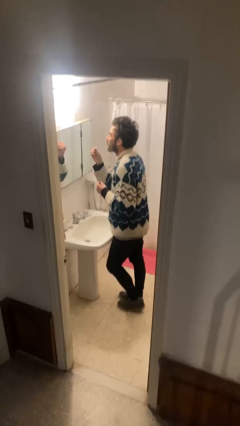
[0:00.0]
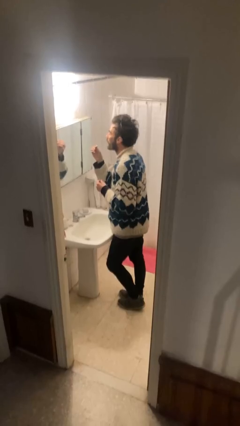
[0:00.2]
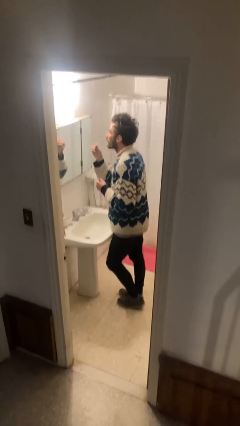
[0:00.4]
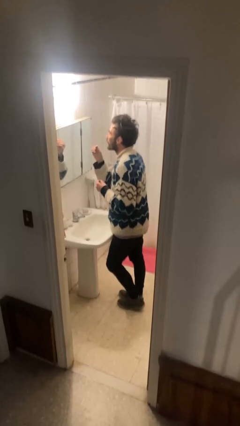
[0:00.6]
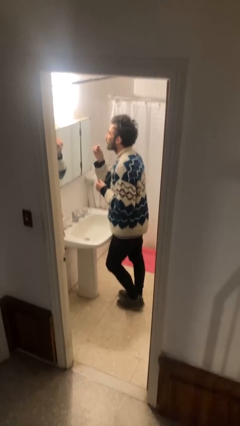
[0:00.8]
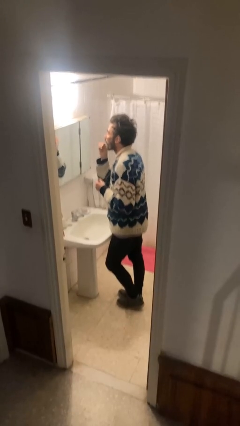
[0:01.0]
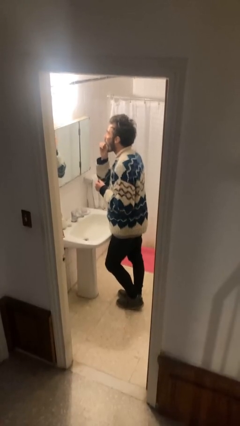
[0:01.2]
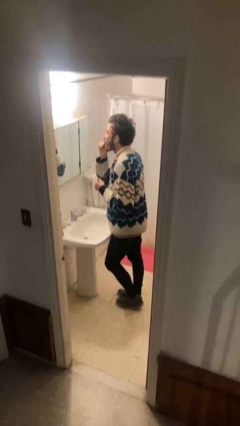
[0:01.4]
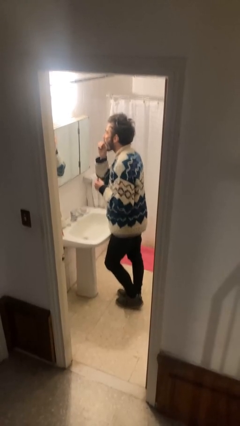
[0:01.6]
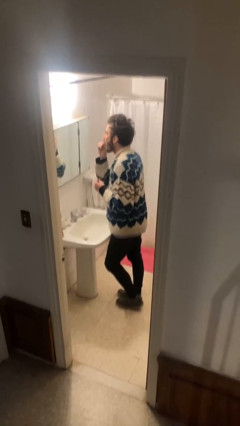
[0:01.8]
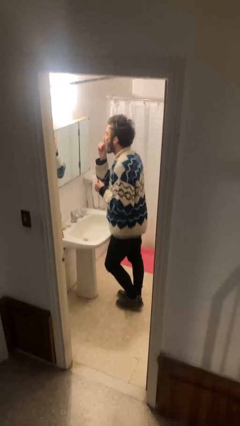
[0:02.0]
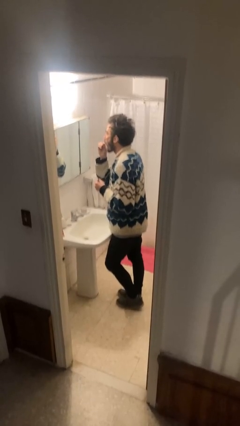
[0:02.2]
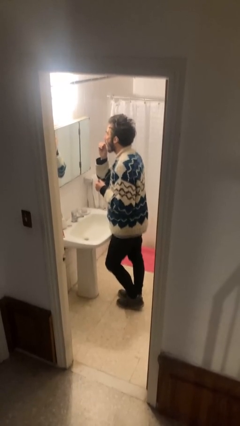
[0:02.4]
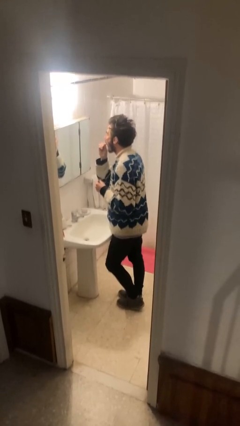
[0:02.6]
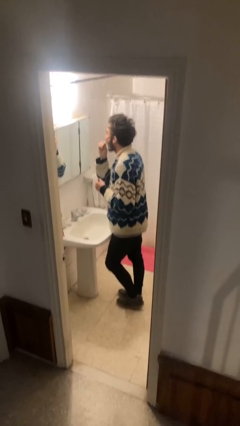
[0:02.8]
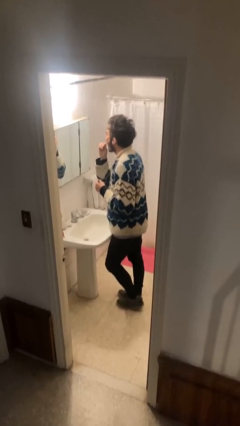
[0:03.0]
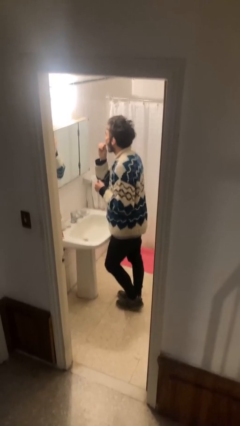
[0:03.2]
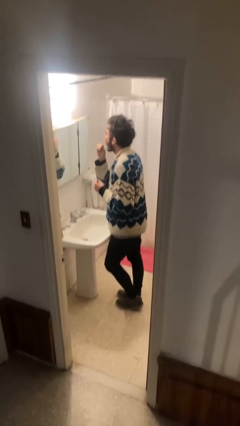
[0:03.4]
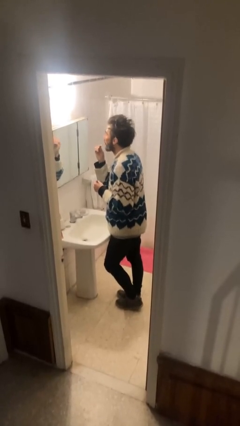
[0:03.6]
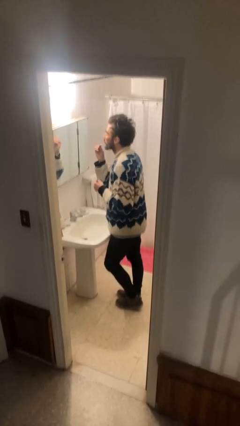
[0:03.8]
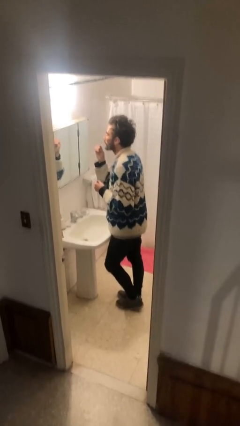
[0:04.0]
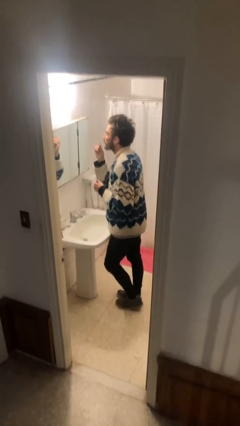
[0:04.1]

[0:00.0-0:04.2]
person applies lip makeup

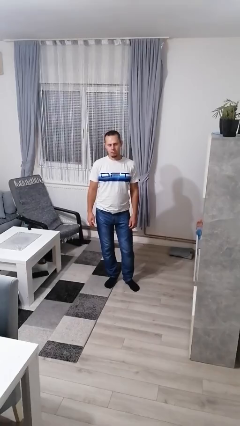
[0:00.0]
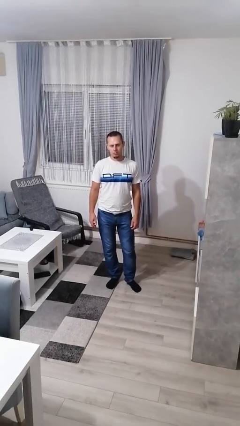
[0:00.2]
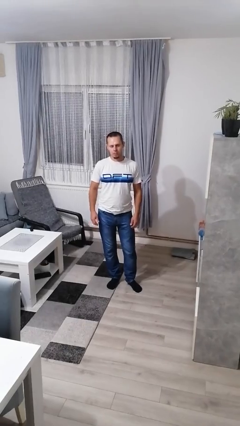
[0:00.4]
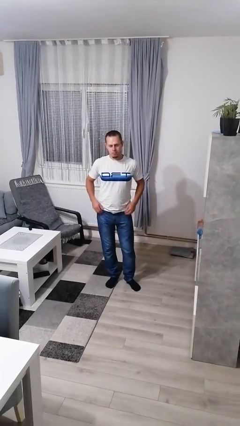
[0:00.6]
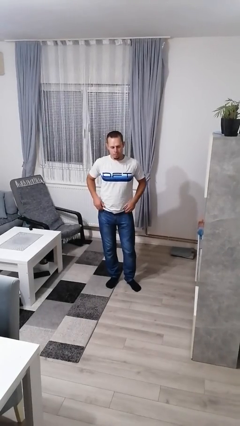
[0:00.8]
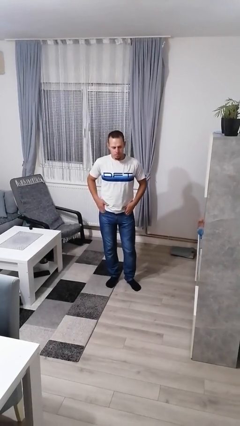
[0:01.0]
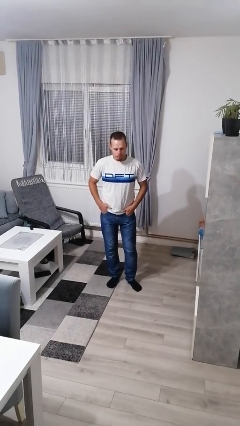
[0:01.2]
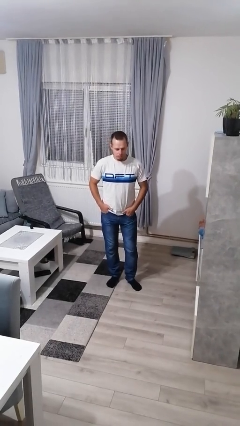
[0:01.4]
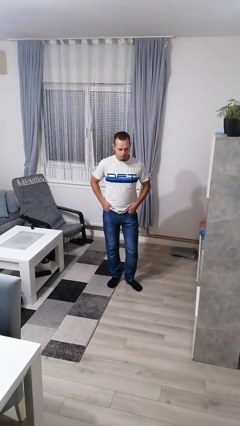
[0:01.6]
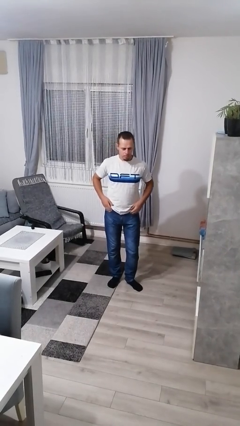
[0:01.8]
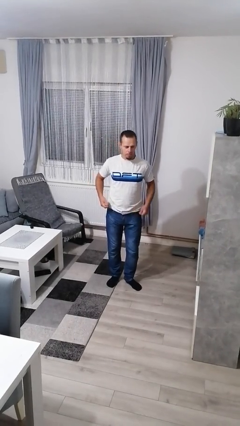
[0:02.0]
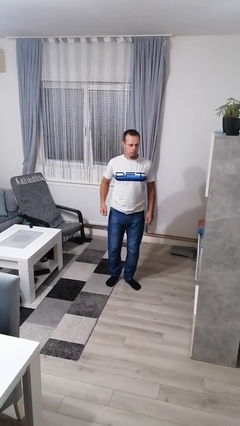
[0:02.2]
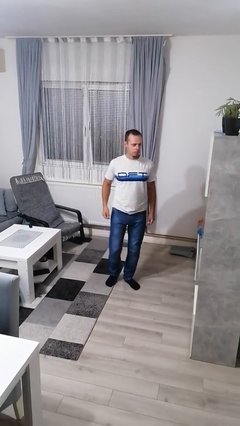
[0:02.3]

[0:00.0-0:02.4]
person puts hands in back pockets

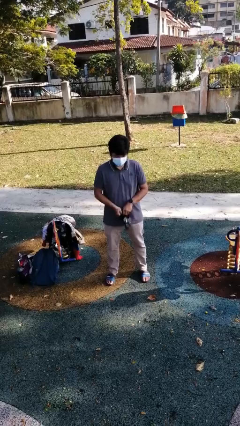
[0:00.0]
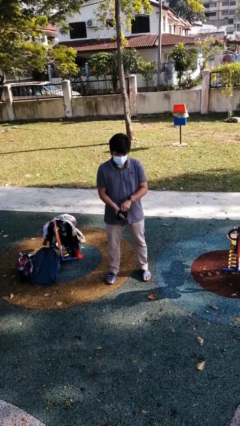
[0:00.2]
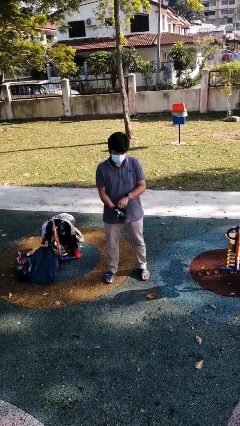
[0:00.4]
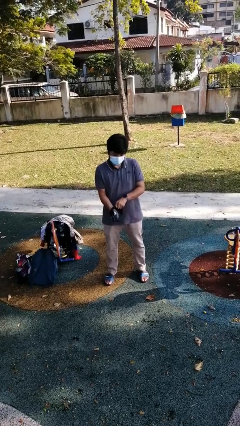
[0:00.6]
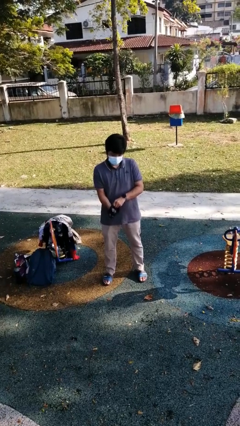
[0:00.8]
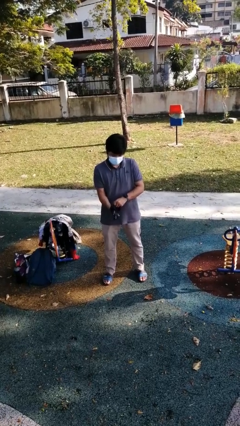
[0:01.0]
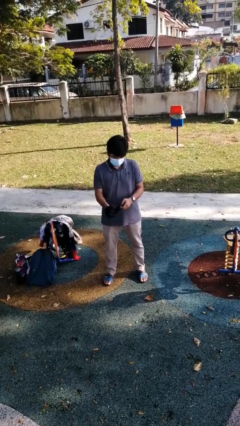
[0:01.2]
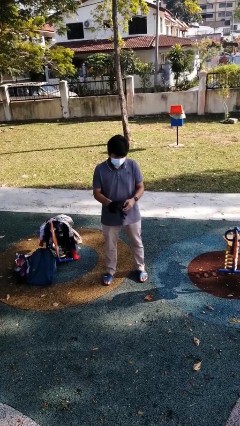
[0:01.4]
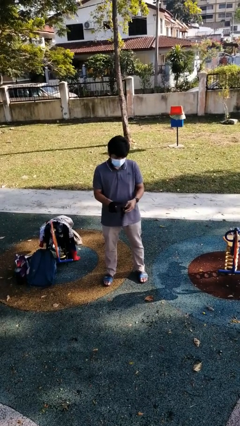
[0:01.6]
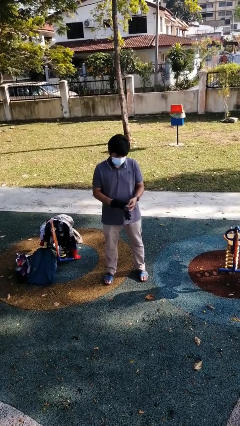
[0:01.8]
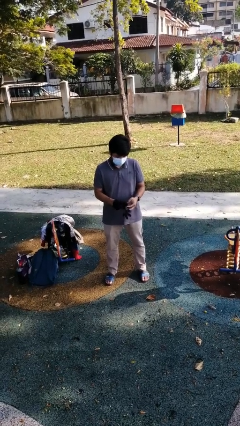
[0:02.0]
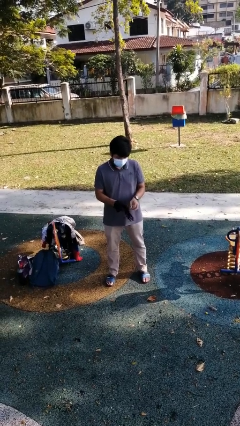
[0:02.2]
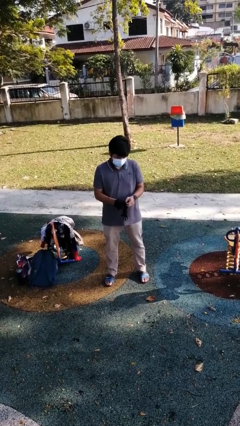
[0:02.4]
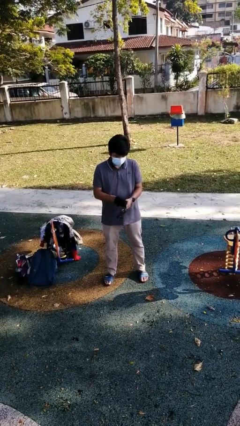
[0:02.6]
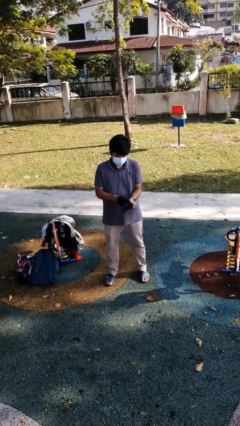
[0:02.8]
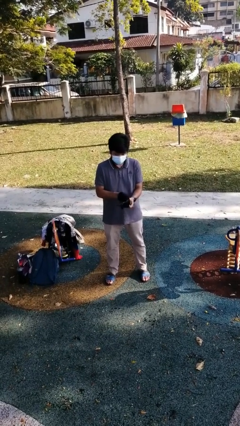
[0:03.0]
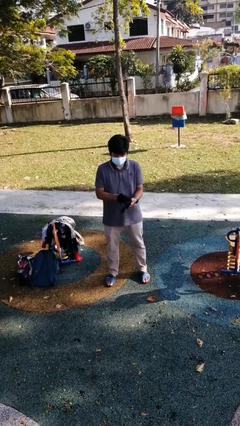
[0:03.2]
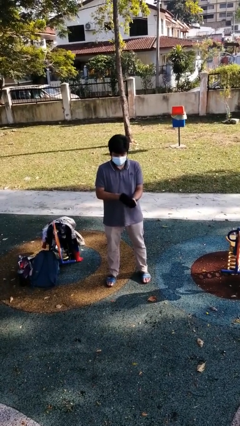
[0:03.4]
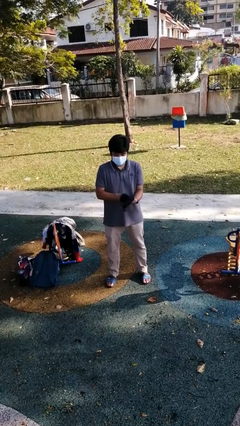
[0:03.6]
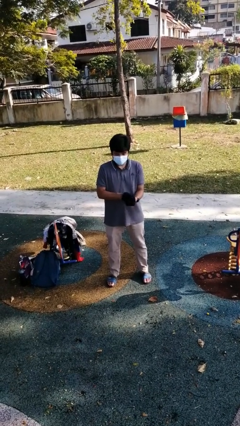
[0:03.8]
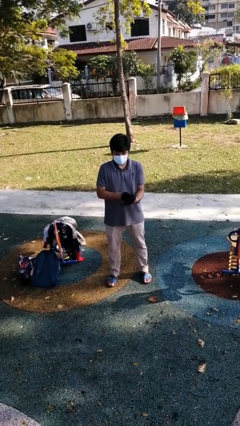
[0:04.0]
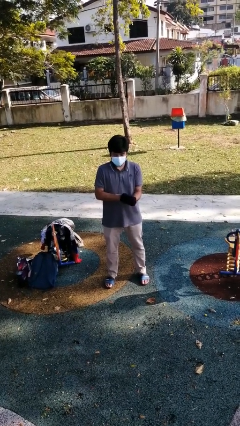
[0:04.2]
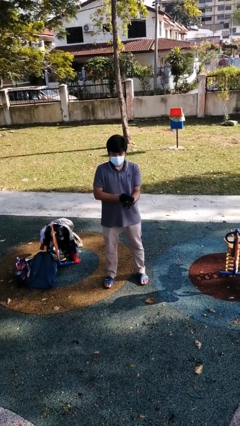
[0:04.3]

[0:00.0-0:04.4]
person puts on gloves

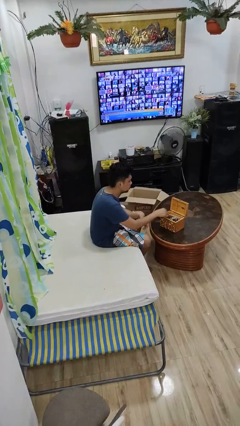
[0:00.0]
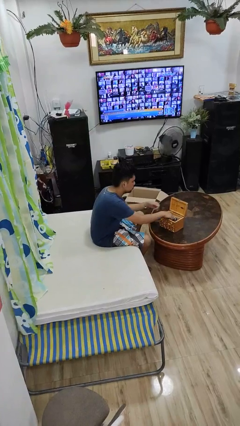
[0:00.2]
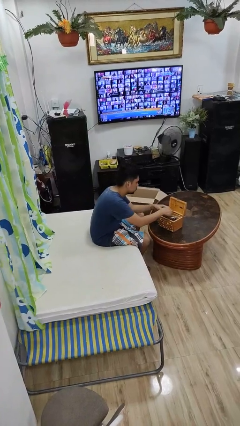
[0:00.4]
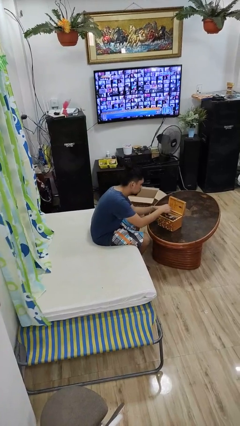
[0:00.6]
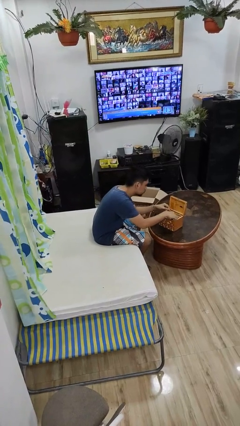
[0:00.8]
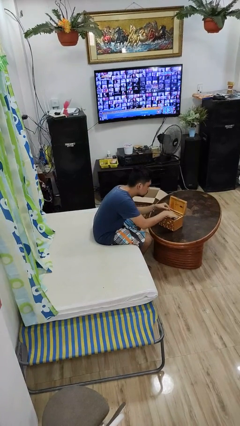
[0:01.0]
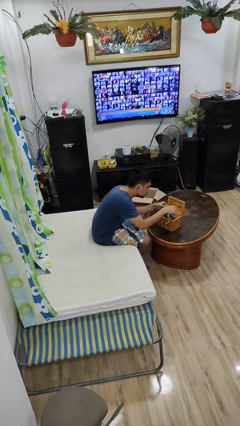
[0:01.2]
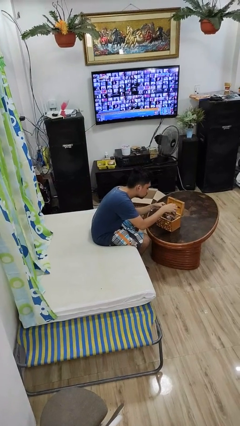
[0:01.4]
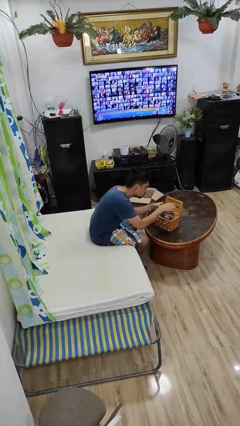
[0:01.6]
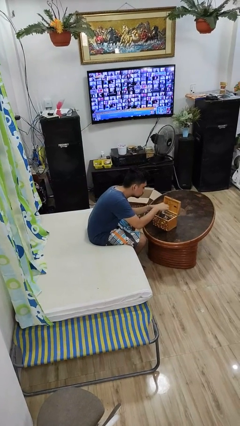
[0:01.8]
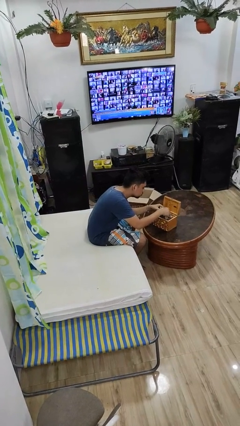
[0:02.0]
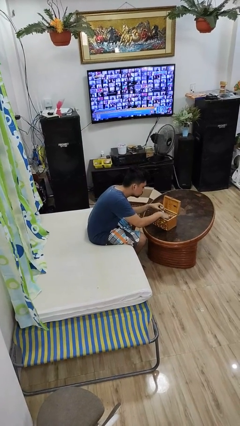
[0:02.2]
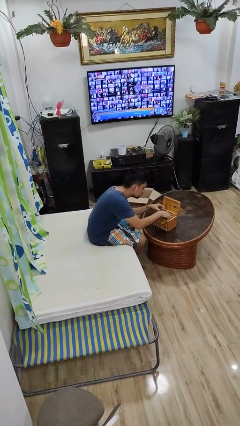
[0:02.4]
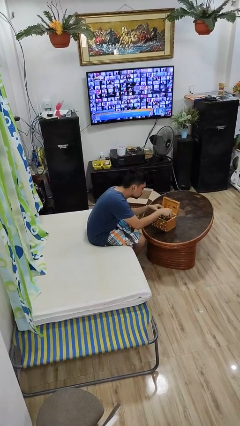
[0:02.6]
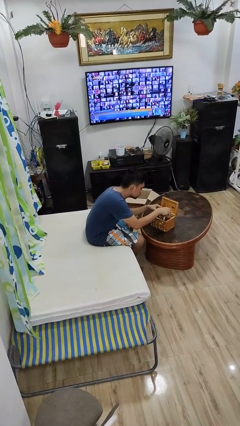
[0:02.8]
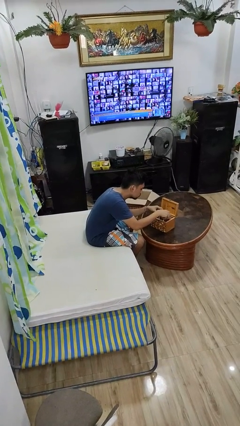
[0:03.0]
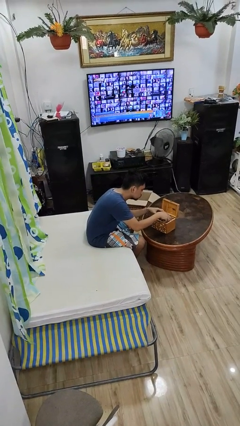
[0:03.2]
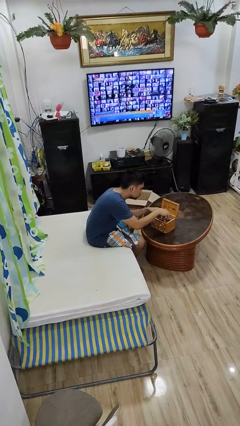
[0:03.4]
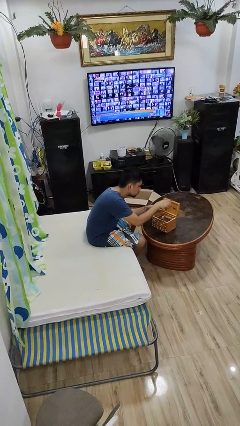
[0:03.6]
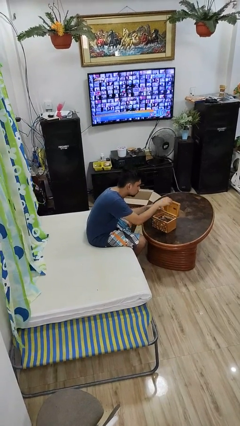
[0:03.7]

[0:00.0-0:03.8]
person searches jewelry box

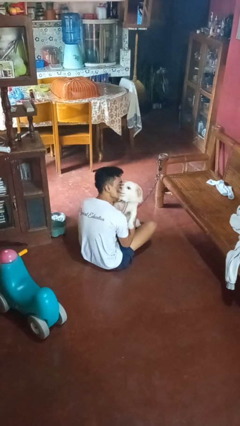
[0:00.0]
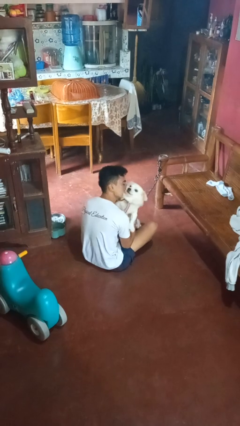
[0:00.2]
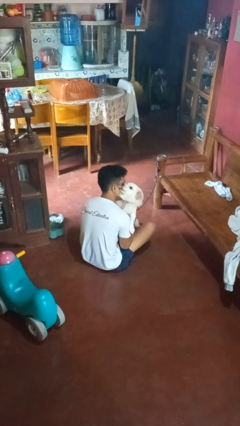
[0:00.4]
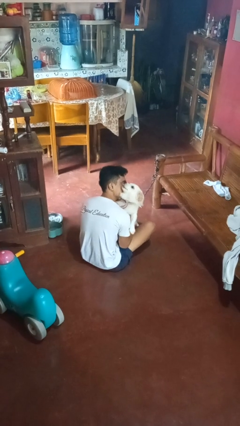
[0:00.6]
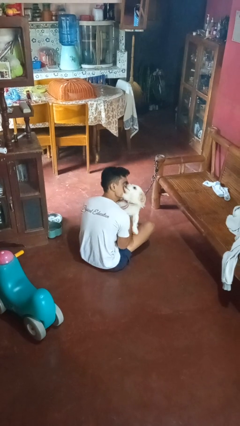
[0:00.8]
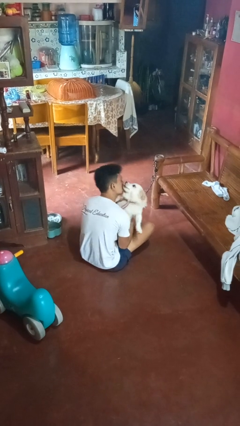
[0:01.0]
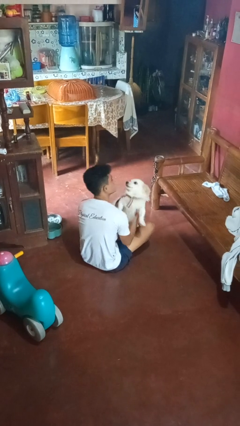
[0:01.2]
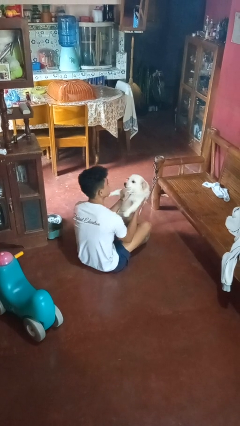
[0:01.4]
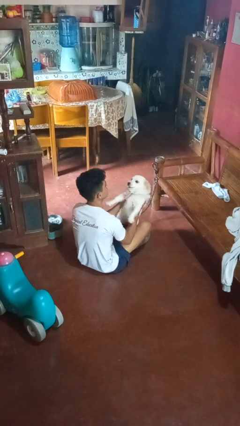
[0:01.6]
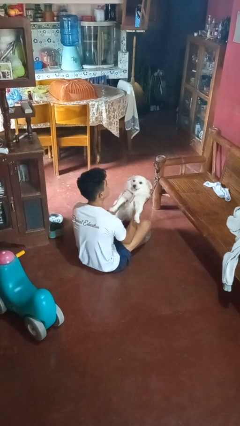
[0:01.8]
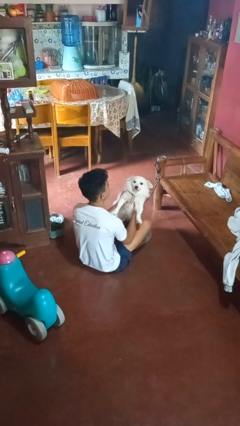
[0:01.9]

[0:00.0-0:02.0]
person hugs dog

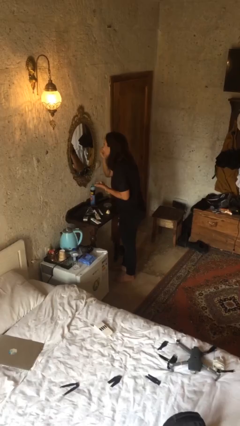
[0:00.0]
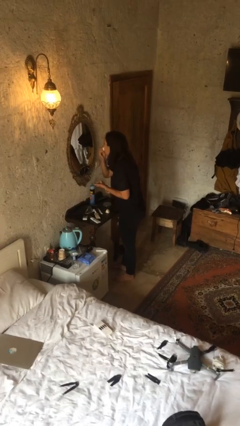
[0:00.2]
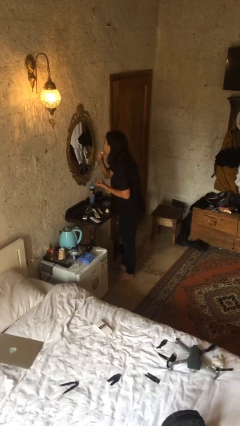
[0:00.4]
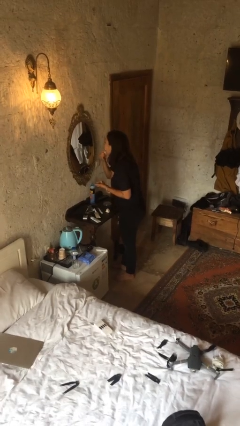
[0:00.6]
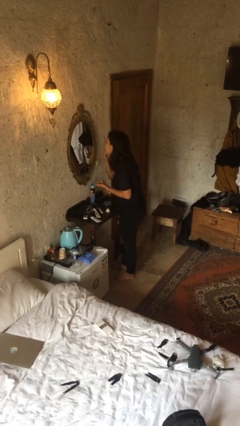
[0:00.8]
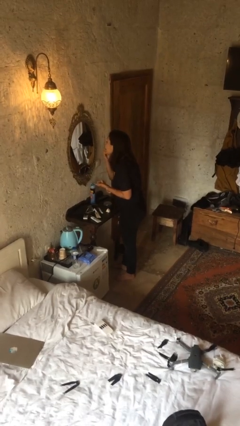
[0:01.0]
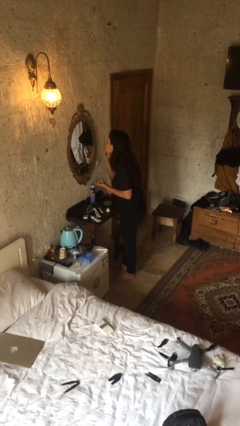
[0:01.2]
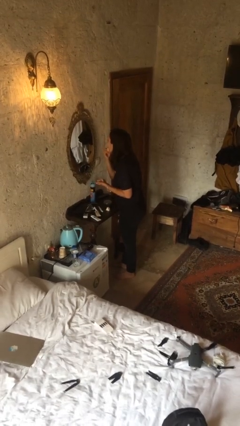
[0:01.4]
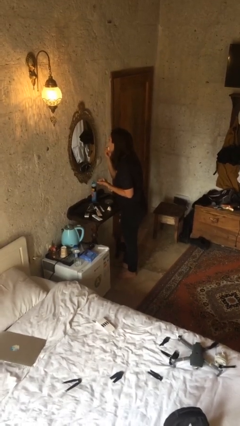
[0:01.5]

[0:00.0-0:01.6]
person applies foundation makeup
